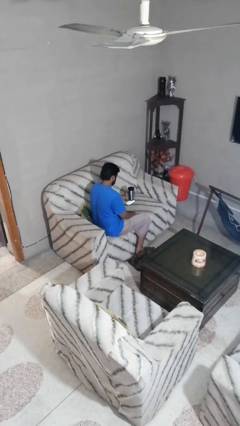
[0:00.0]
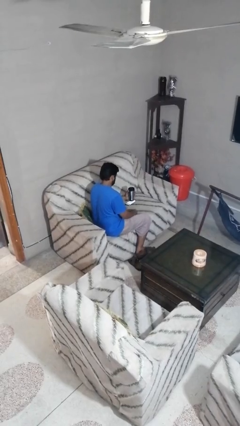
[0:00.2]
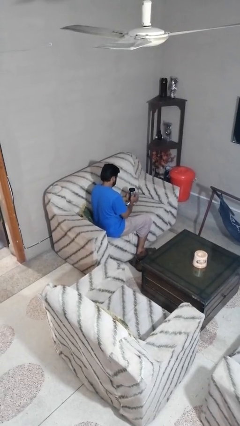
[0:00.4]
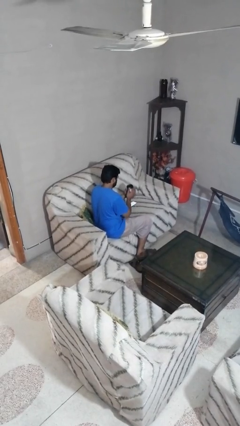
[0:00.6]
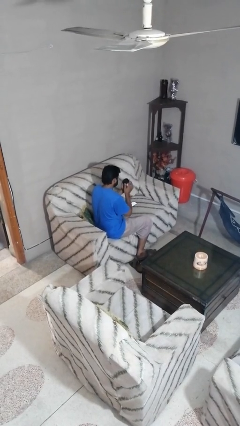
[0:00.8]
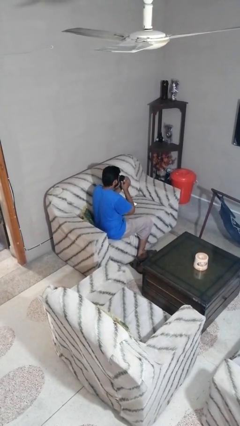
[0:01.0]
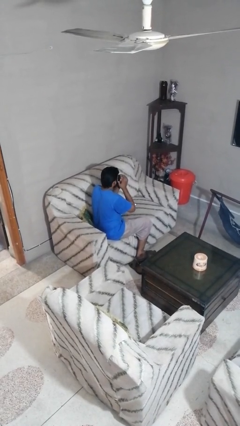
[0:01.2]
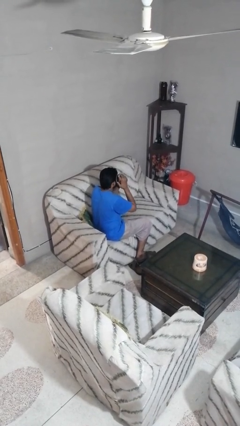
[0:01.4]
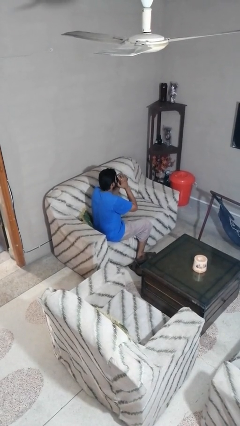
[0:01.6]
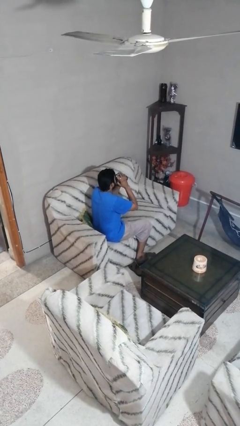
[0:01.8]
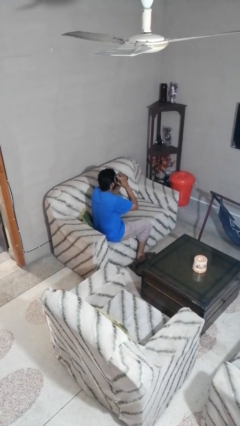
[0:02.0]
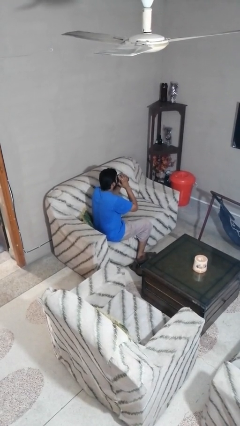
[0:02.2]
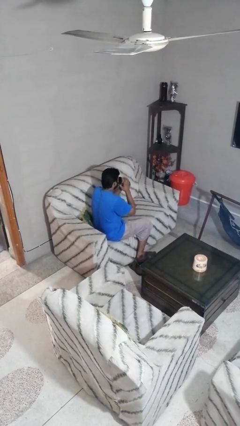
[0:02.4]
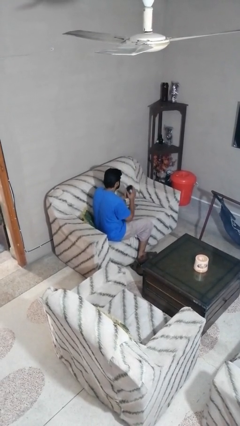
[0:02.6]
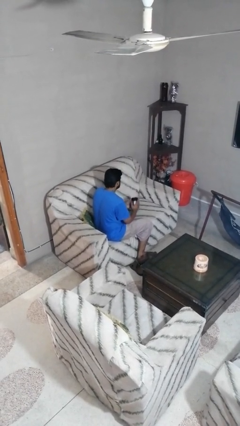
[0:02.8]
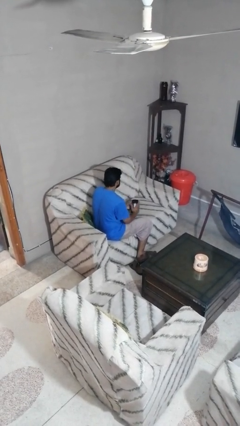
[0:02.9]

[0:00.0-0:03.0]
person drinks from beverage can

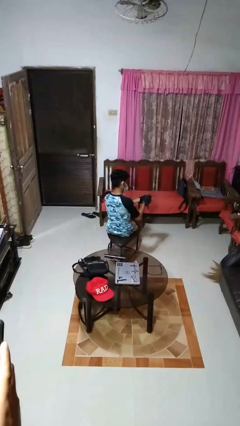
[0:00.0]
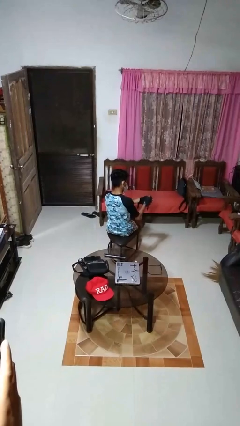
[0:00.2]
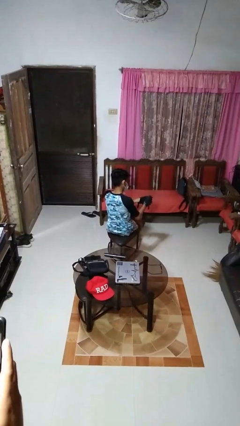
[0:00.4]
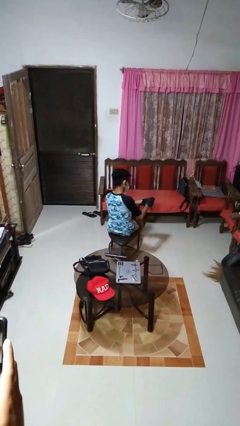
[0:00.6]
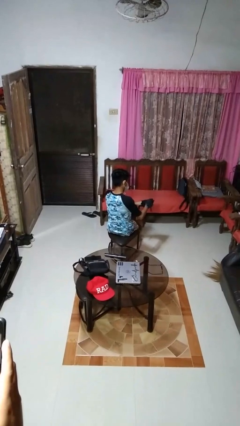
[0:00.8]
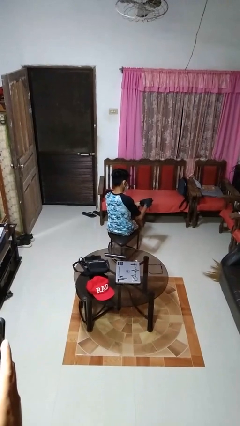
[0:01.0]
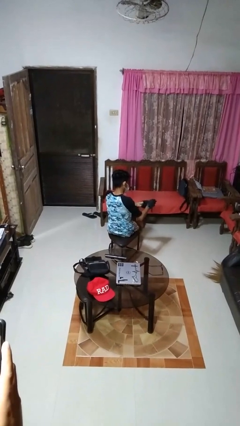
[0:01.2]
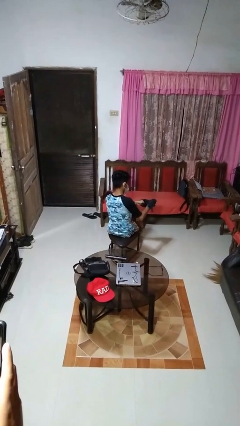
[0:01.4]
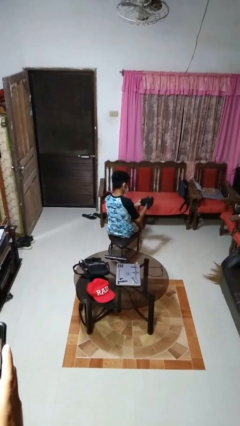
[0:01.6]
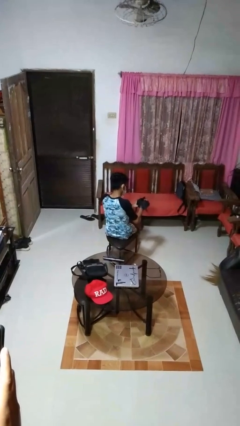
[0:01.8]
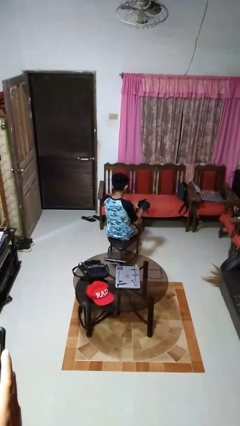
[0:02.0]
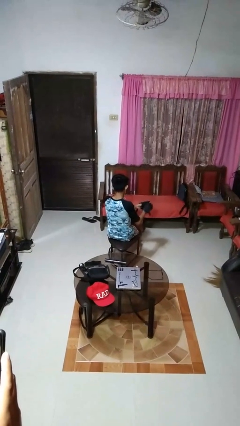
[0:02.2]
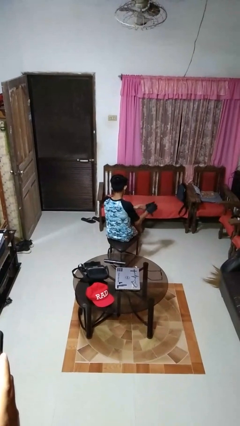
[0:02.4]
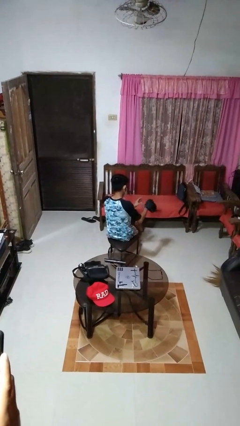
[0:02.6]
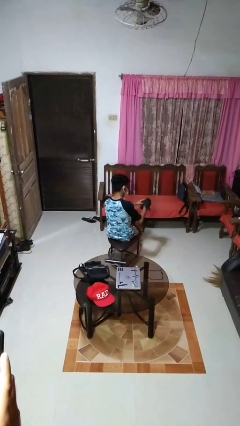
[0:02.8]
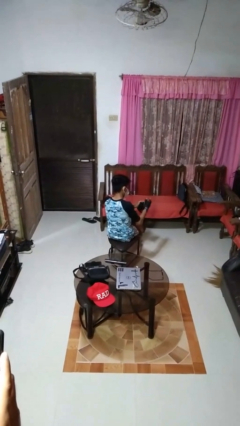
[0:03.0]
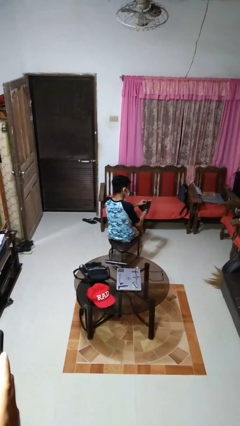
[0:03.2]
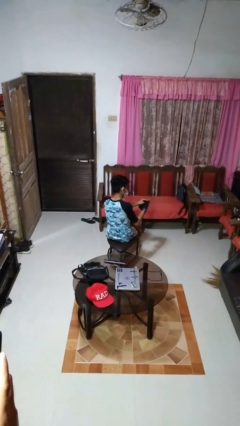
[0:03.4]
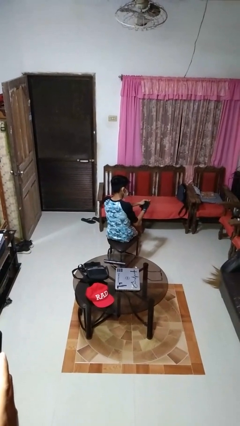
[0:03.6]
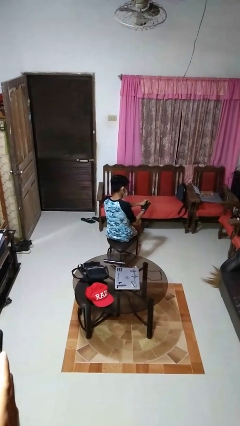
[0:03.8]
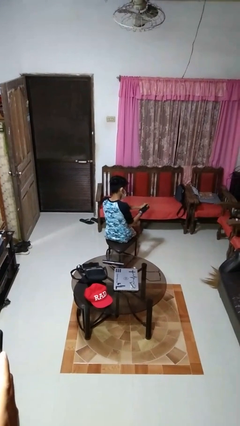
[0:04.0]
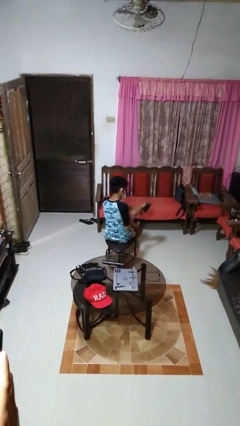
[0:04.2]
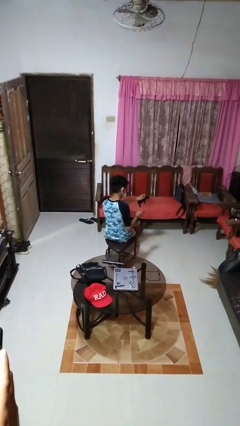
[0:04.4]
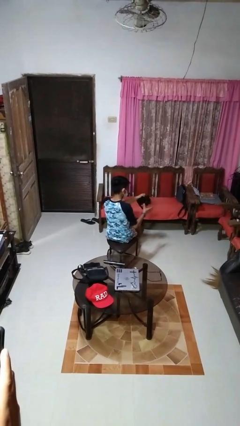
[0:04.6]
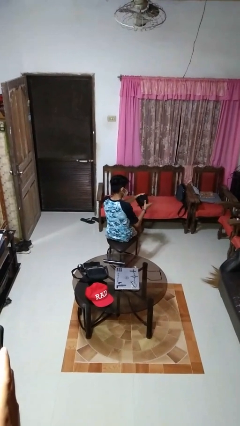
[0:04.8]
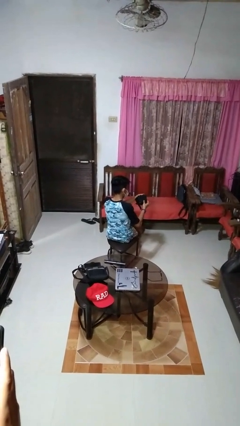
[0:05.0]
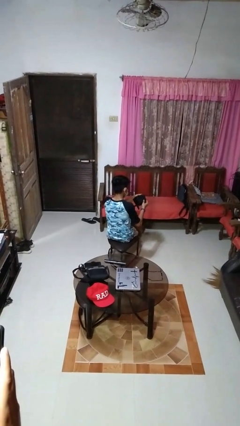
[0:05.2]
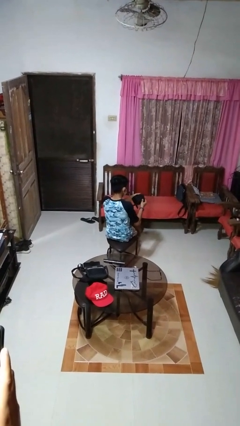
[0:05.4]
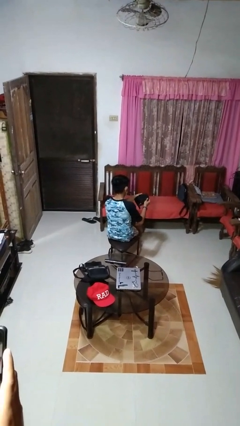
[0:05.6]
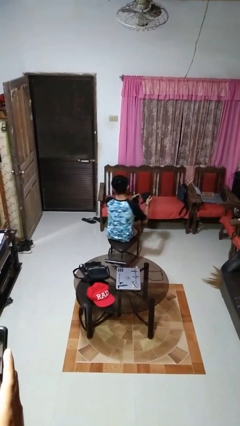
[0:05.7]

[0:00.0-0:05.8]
person takes off gloves

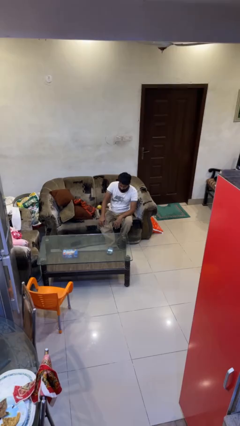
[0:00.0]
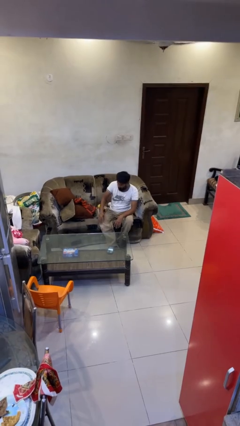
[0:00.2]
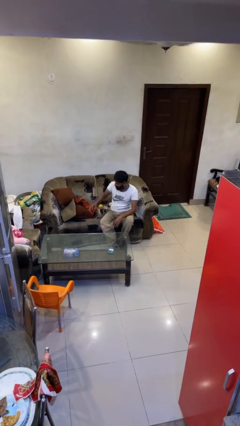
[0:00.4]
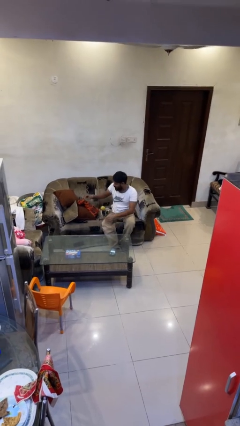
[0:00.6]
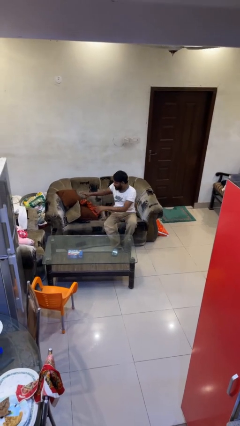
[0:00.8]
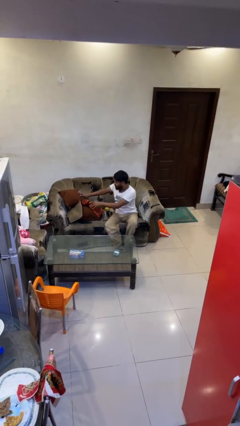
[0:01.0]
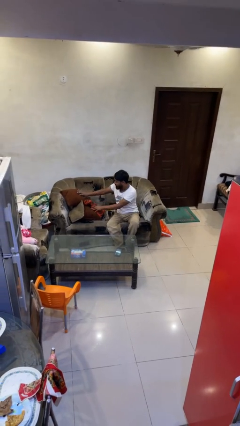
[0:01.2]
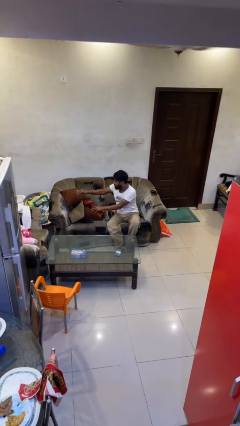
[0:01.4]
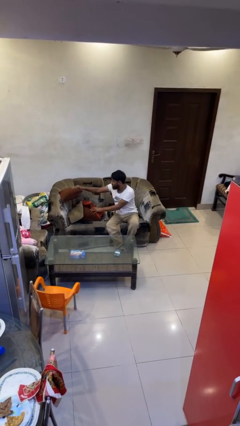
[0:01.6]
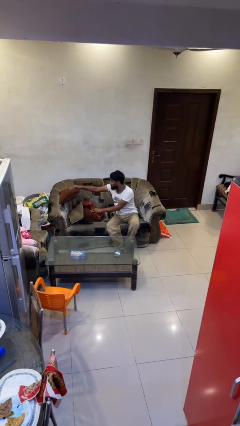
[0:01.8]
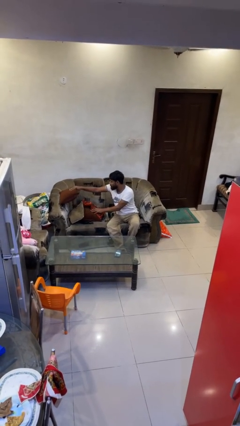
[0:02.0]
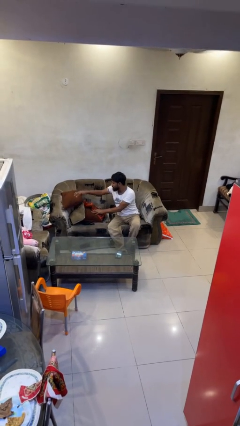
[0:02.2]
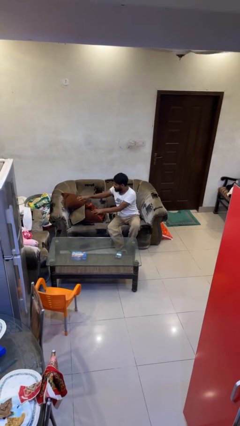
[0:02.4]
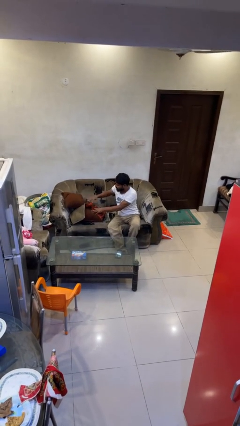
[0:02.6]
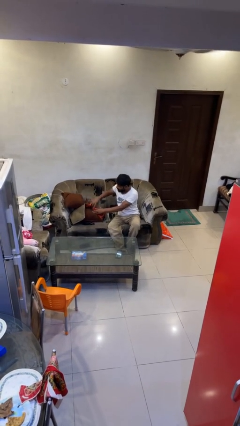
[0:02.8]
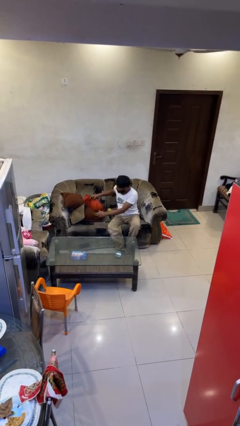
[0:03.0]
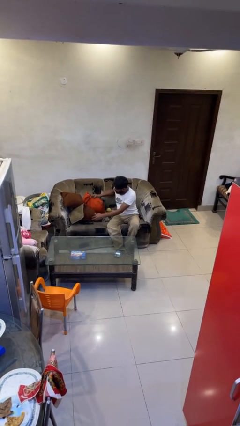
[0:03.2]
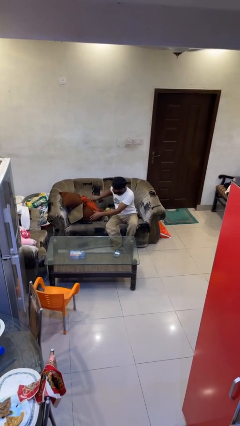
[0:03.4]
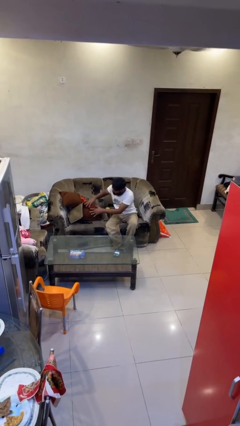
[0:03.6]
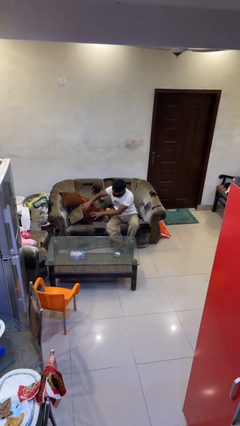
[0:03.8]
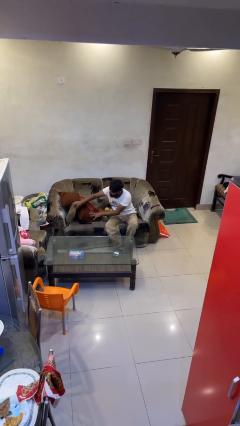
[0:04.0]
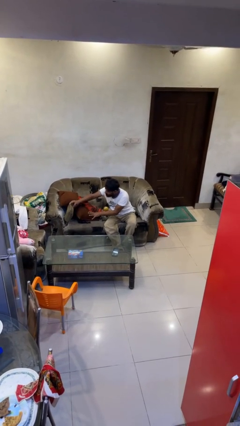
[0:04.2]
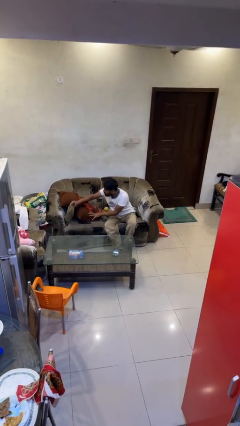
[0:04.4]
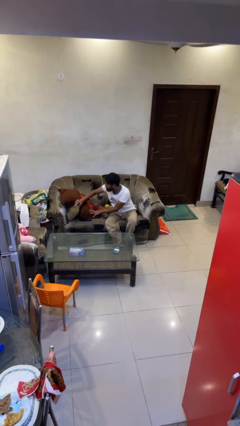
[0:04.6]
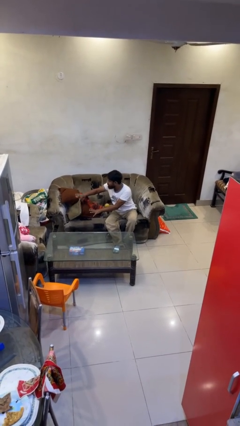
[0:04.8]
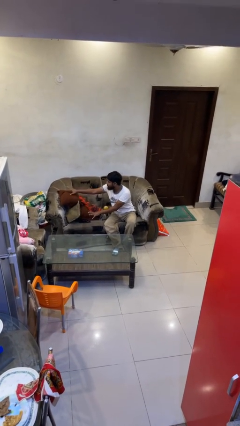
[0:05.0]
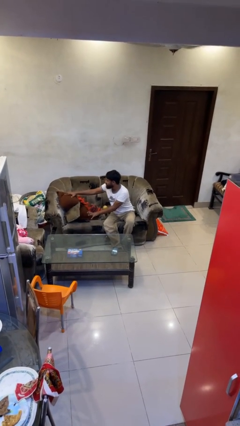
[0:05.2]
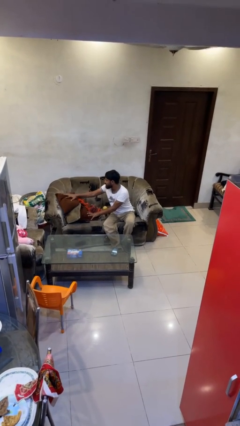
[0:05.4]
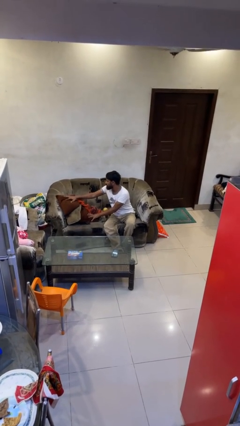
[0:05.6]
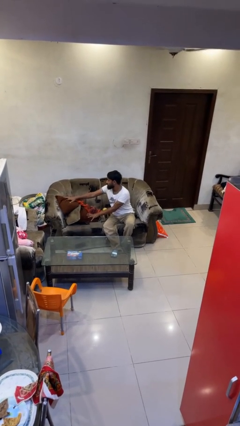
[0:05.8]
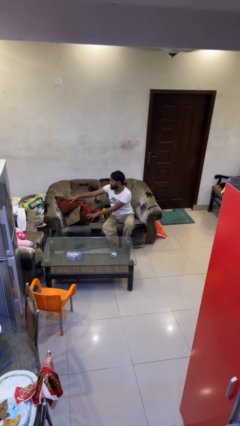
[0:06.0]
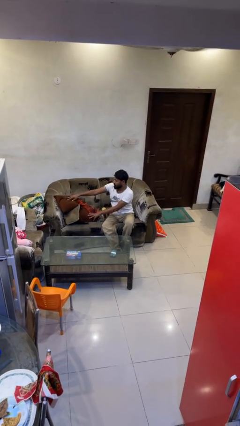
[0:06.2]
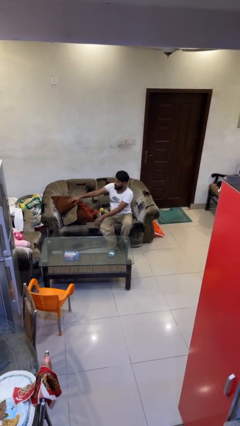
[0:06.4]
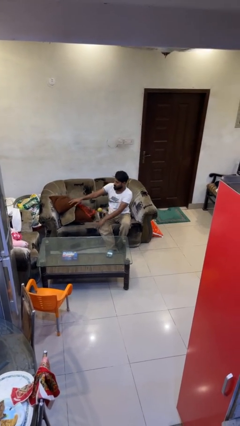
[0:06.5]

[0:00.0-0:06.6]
person searches in couch

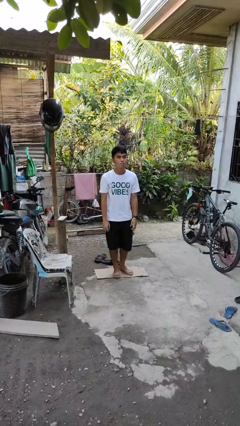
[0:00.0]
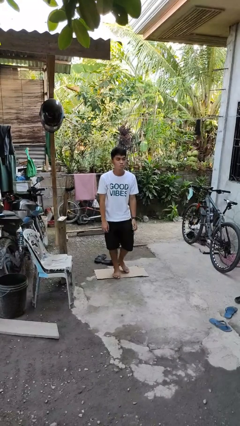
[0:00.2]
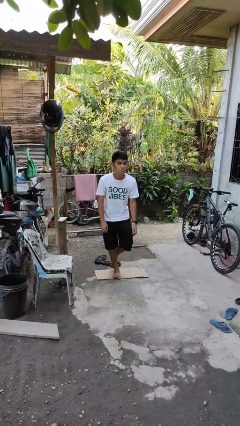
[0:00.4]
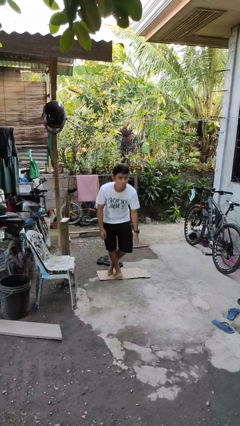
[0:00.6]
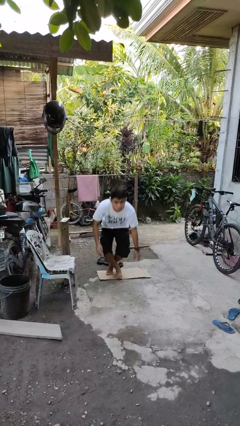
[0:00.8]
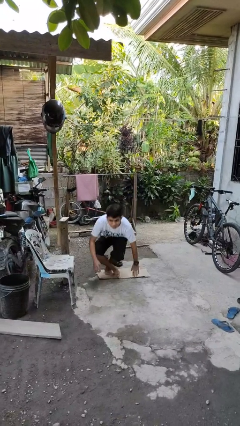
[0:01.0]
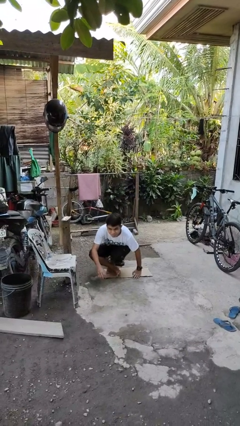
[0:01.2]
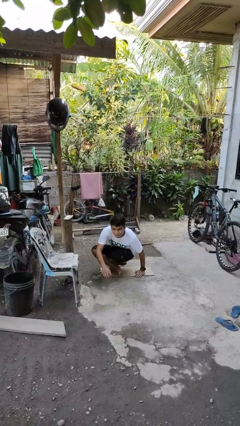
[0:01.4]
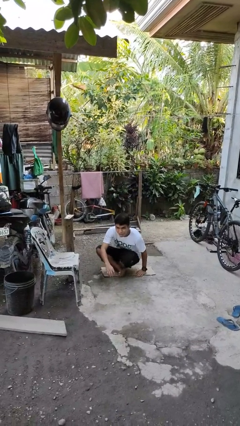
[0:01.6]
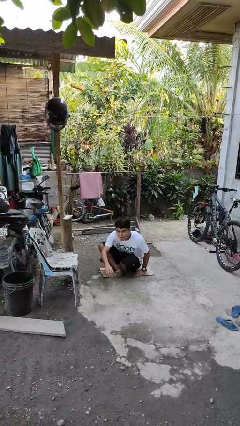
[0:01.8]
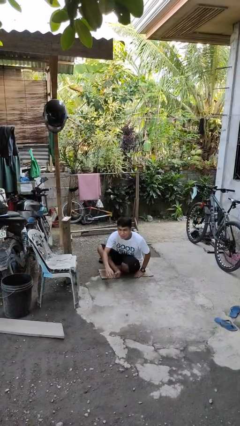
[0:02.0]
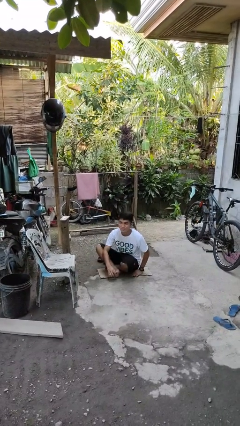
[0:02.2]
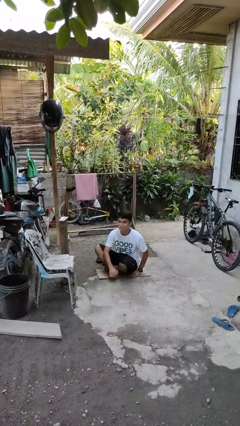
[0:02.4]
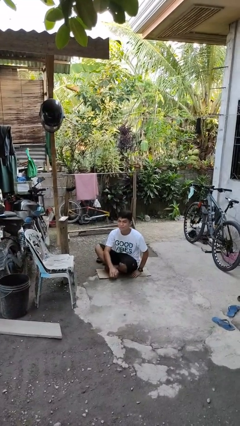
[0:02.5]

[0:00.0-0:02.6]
person sits crisscross
